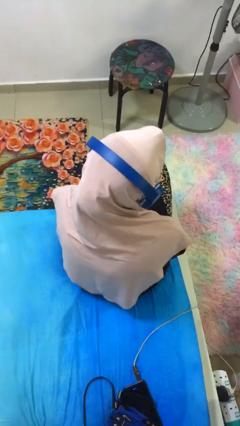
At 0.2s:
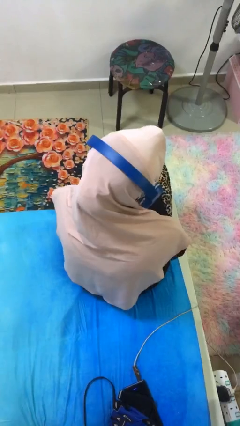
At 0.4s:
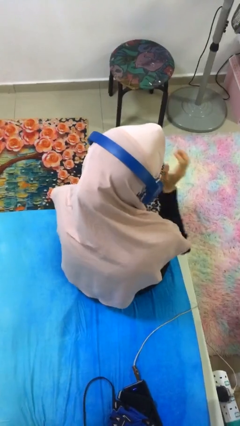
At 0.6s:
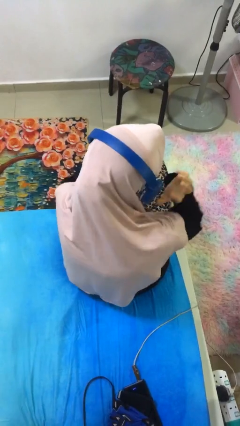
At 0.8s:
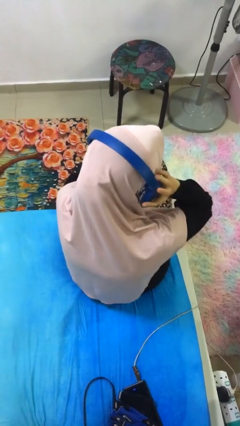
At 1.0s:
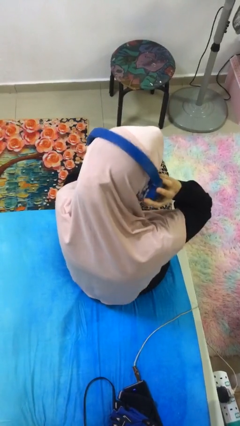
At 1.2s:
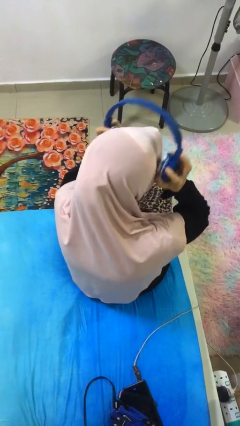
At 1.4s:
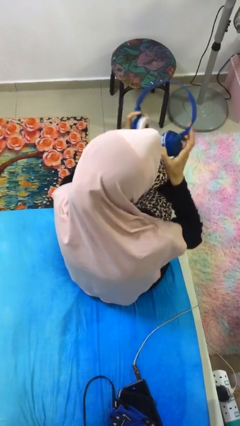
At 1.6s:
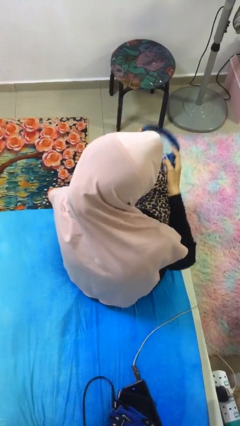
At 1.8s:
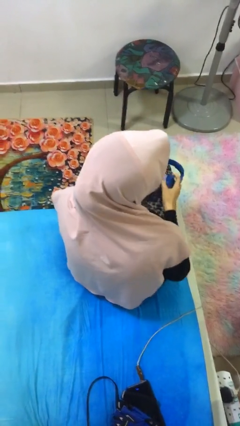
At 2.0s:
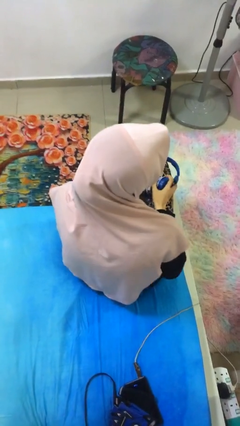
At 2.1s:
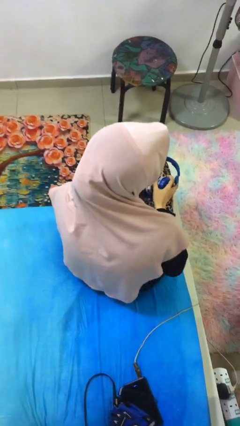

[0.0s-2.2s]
person takes off headphones

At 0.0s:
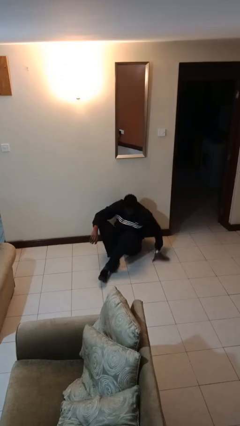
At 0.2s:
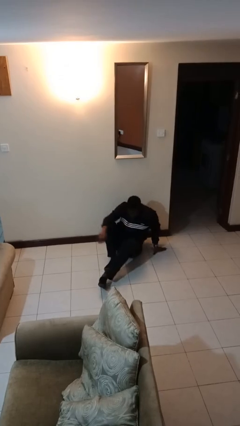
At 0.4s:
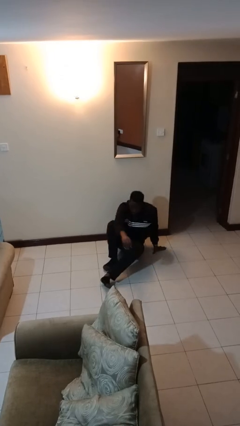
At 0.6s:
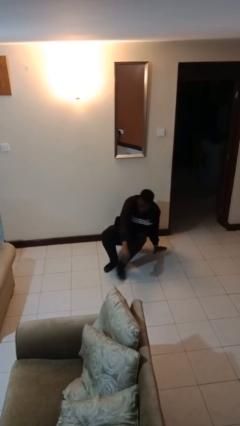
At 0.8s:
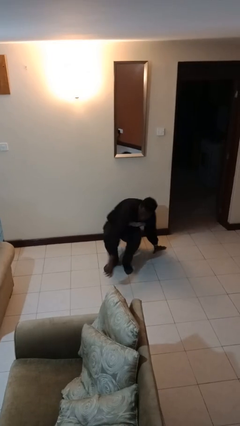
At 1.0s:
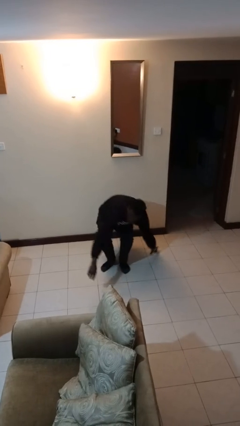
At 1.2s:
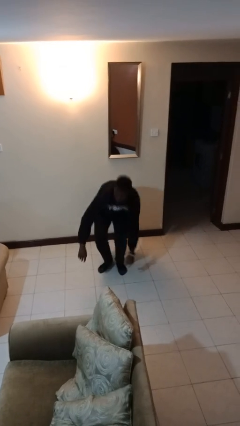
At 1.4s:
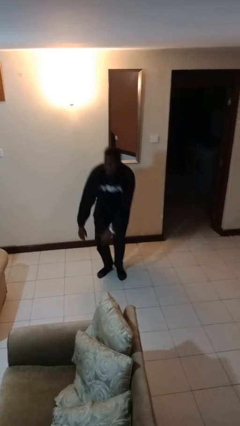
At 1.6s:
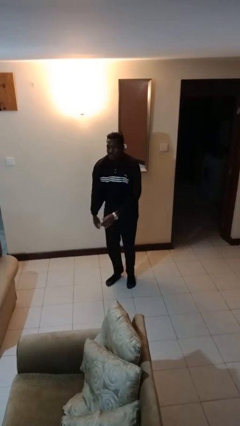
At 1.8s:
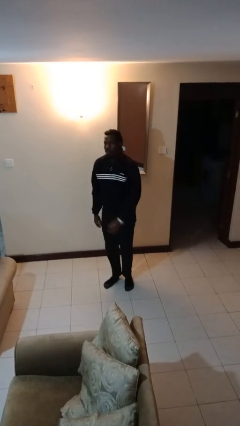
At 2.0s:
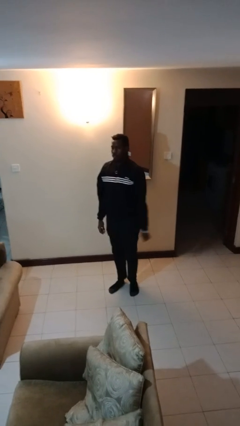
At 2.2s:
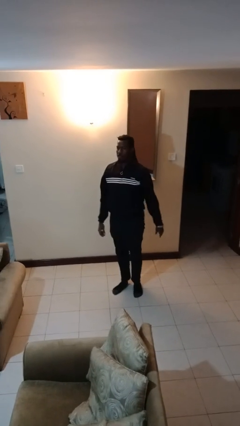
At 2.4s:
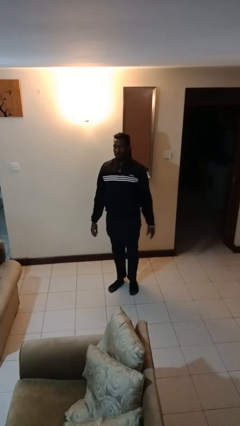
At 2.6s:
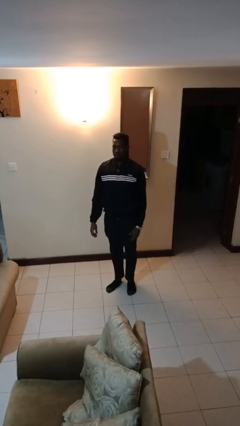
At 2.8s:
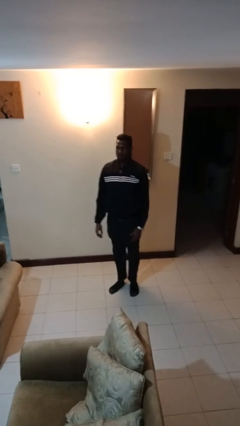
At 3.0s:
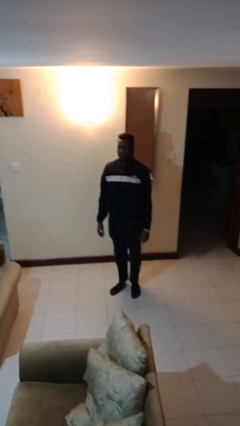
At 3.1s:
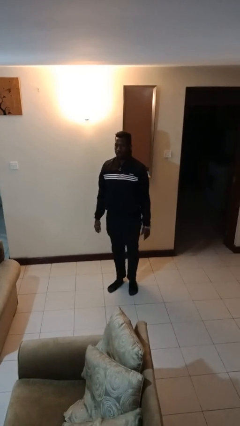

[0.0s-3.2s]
person stands up from floor

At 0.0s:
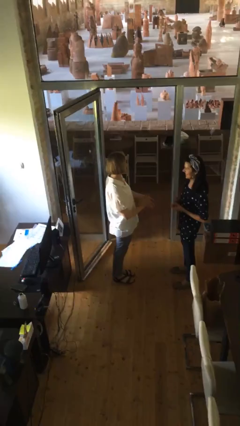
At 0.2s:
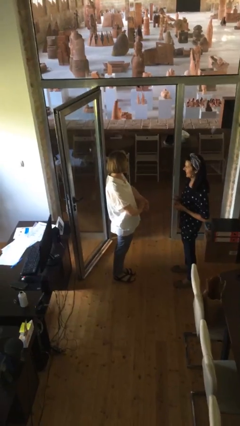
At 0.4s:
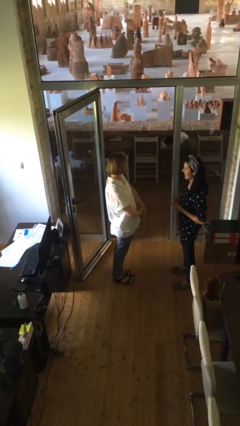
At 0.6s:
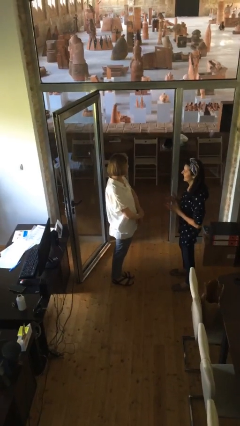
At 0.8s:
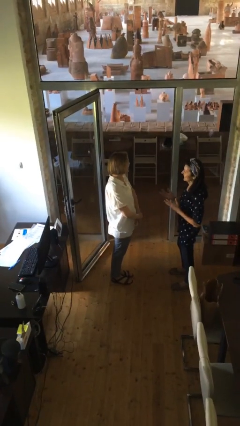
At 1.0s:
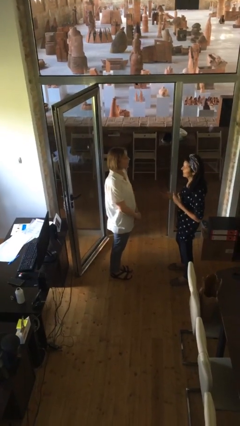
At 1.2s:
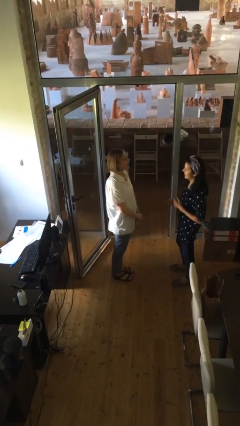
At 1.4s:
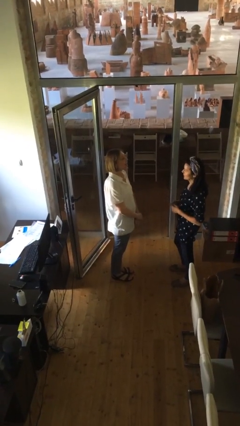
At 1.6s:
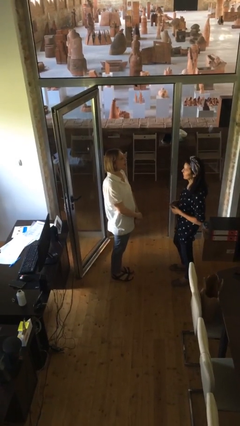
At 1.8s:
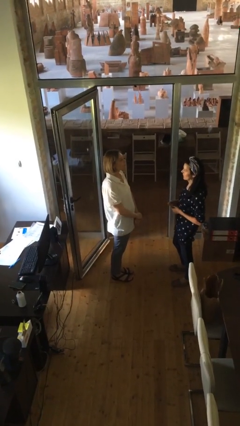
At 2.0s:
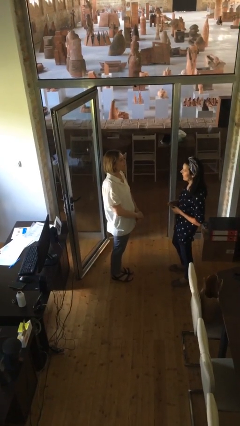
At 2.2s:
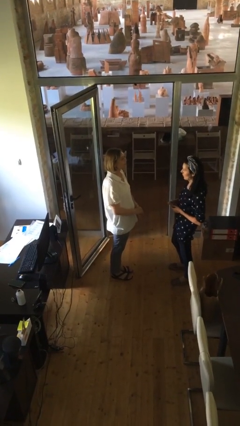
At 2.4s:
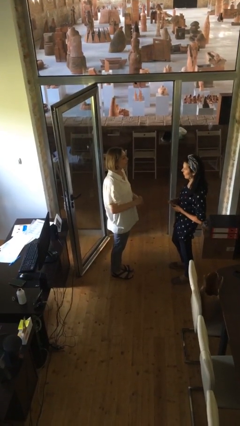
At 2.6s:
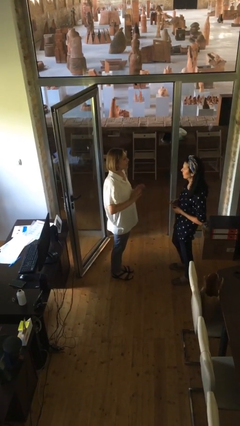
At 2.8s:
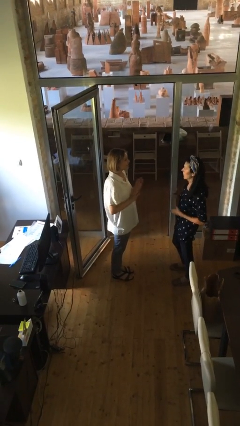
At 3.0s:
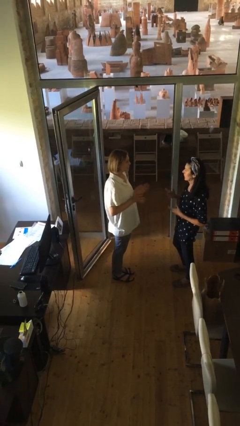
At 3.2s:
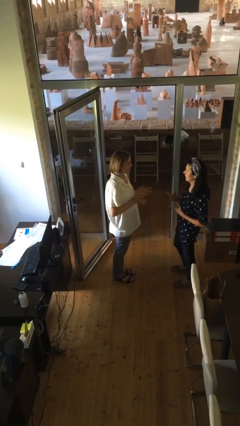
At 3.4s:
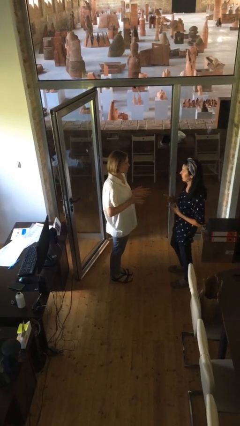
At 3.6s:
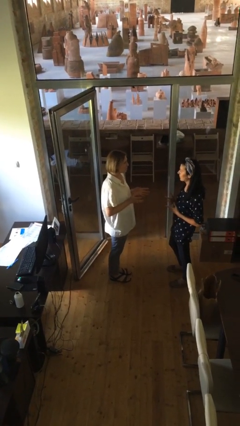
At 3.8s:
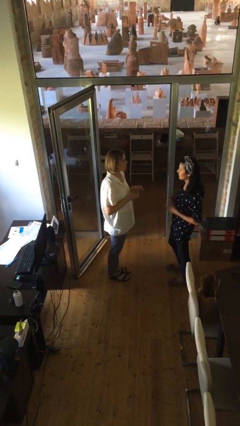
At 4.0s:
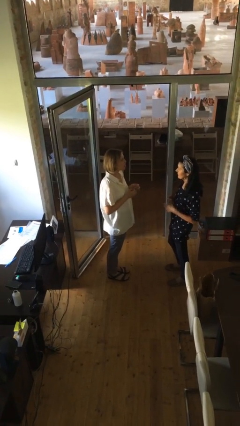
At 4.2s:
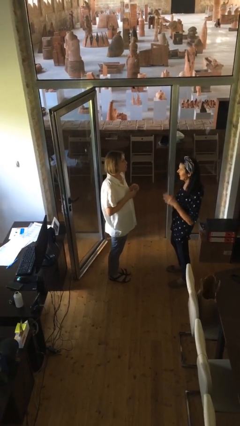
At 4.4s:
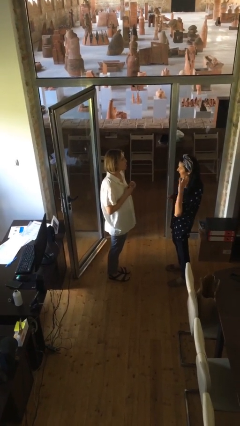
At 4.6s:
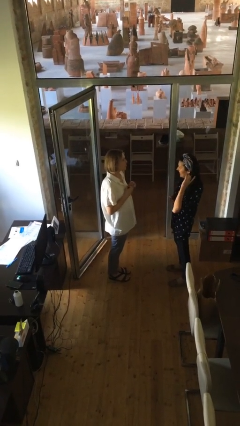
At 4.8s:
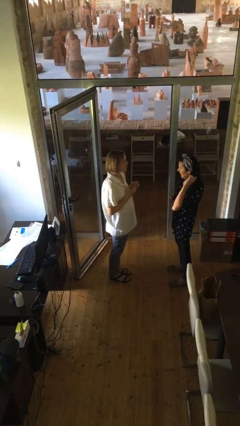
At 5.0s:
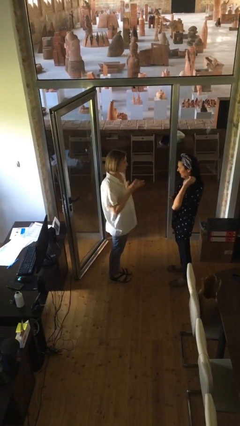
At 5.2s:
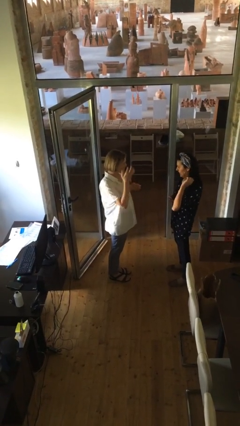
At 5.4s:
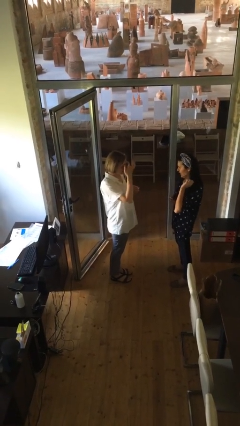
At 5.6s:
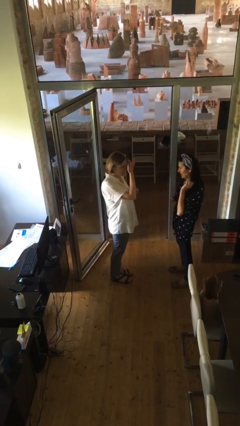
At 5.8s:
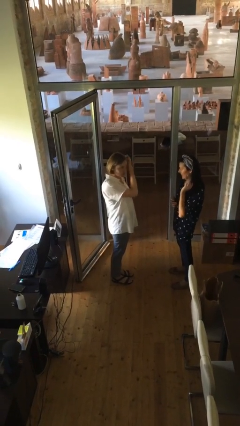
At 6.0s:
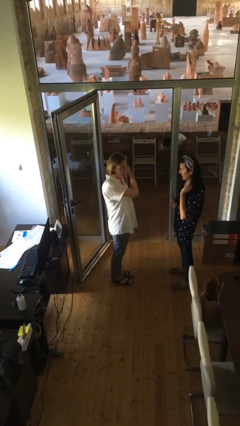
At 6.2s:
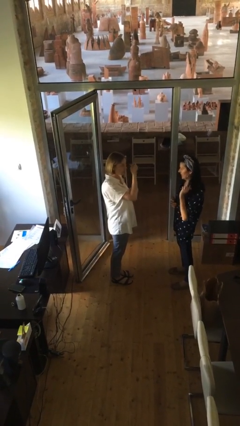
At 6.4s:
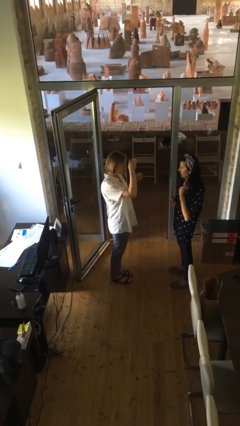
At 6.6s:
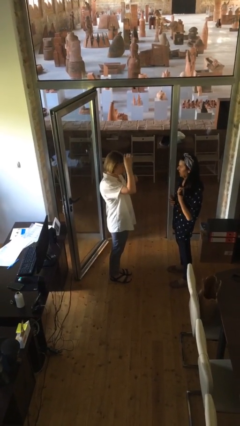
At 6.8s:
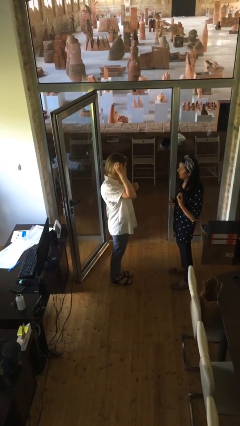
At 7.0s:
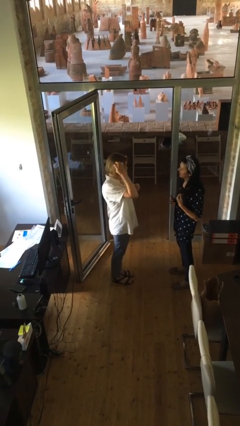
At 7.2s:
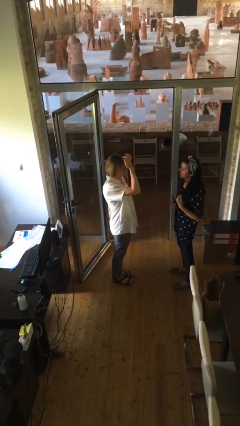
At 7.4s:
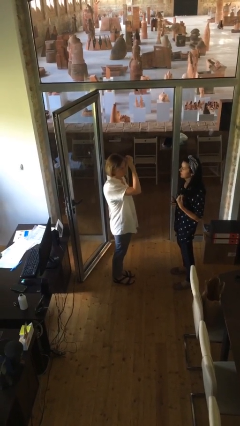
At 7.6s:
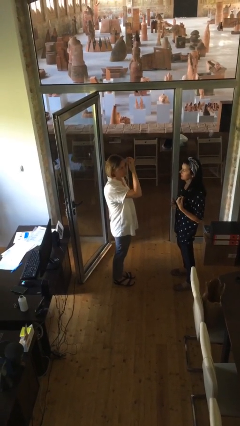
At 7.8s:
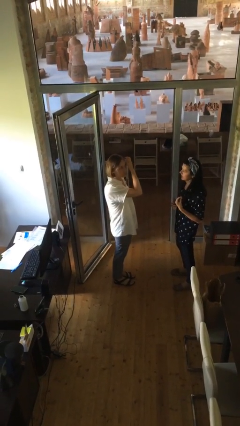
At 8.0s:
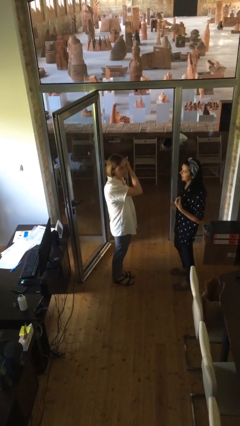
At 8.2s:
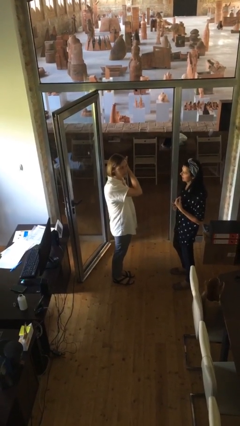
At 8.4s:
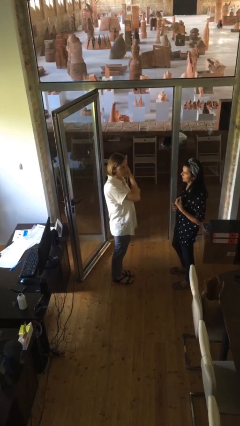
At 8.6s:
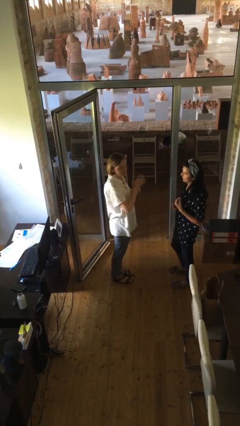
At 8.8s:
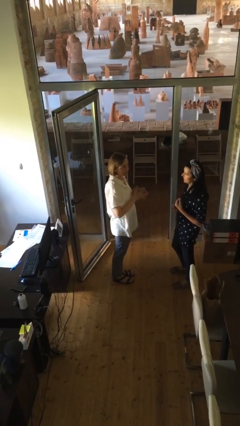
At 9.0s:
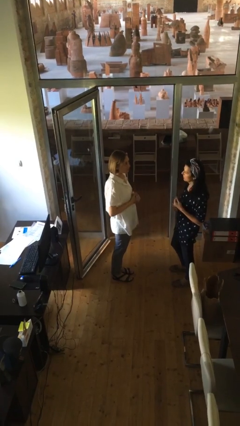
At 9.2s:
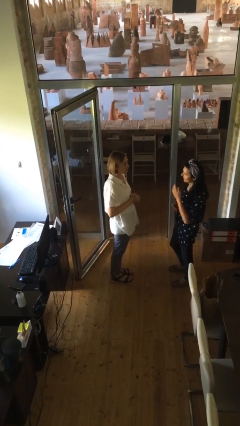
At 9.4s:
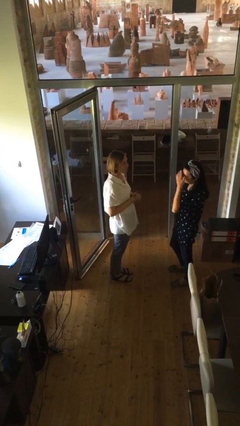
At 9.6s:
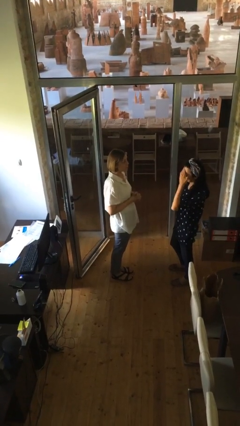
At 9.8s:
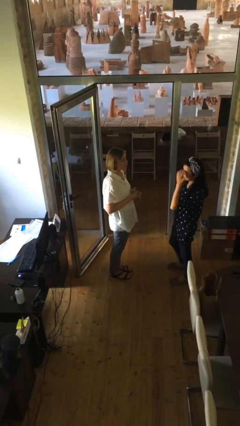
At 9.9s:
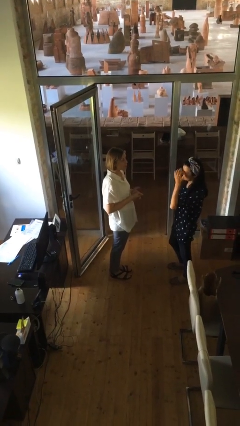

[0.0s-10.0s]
person talks to person

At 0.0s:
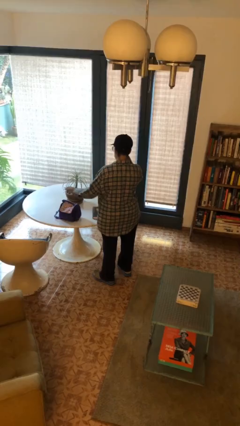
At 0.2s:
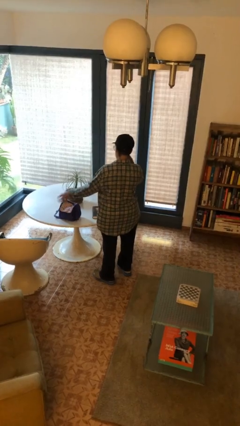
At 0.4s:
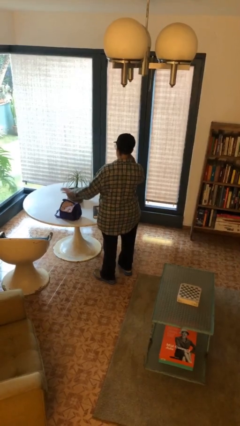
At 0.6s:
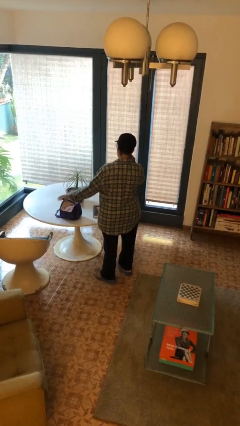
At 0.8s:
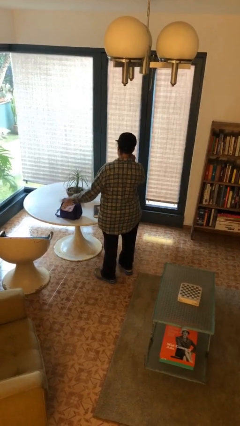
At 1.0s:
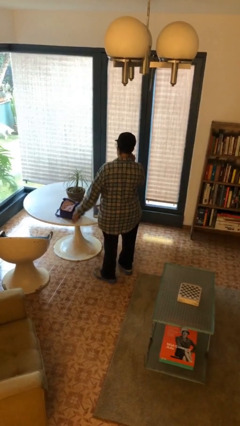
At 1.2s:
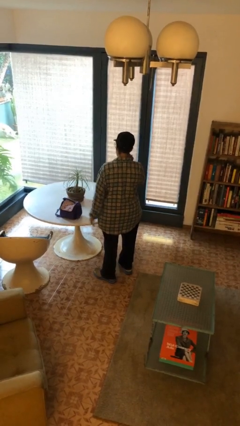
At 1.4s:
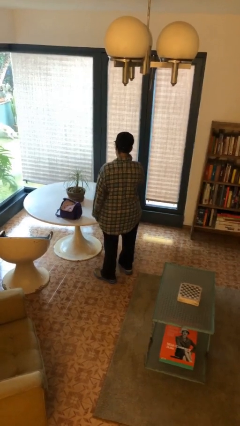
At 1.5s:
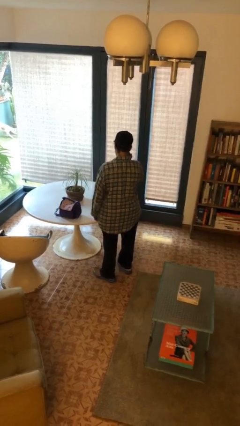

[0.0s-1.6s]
person waves hand over object

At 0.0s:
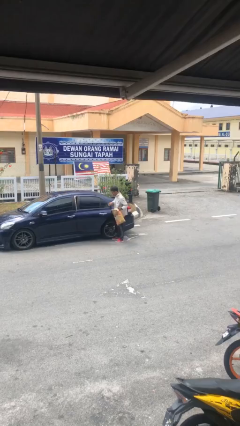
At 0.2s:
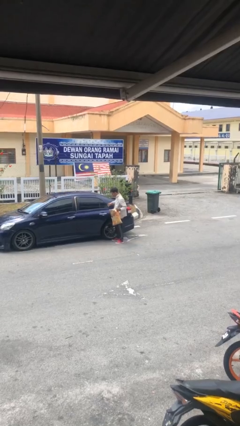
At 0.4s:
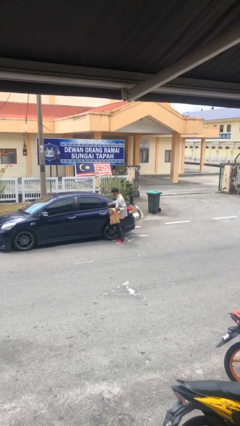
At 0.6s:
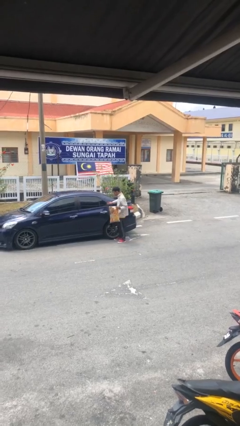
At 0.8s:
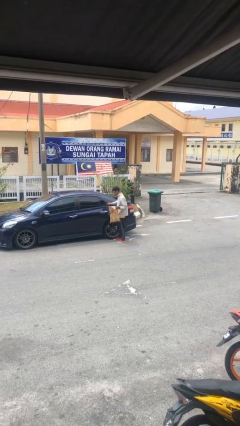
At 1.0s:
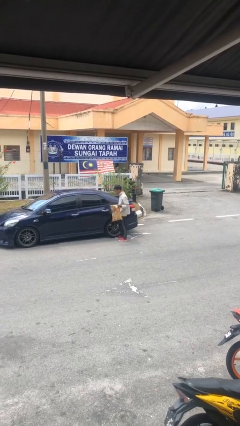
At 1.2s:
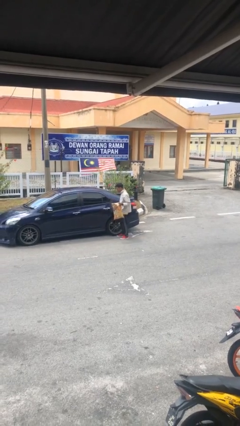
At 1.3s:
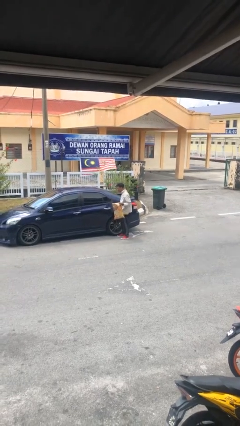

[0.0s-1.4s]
person closes car door
